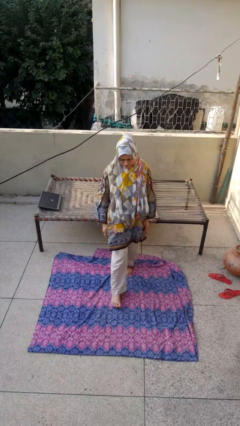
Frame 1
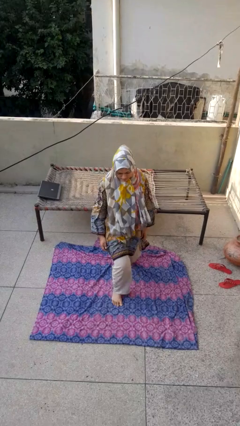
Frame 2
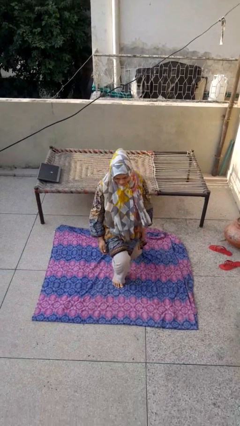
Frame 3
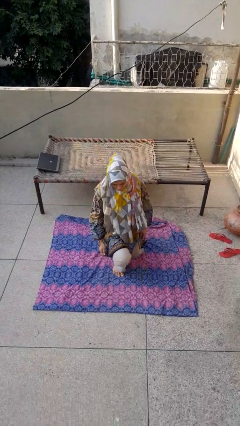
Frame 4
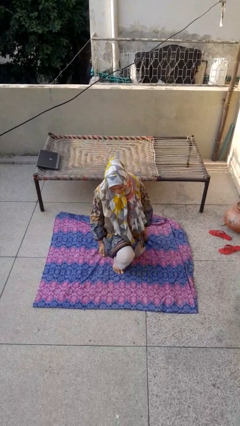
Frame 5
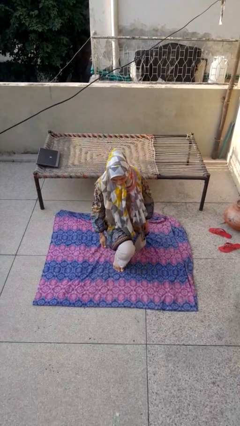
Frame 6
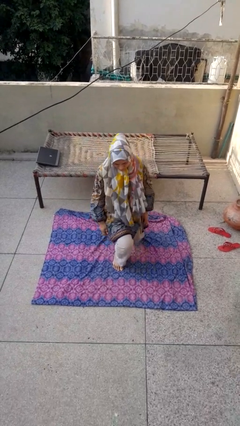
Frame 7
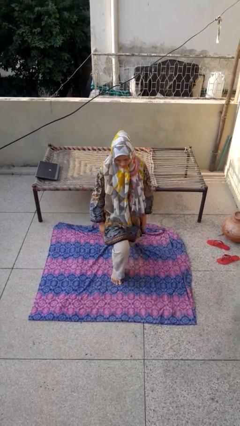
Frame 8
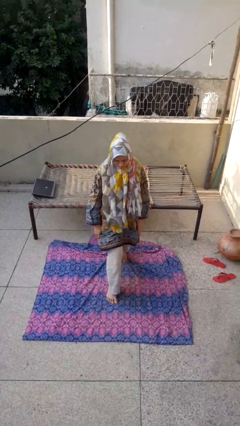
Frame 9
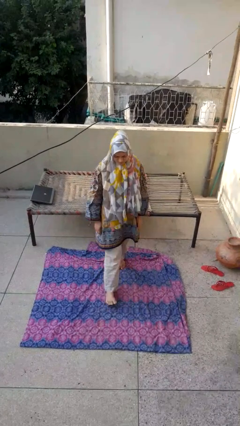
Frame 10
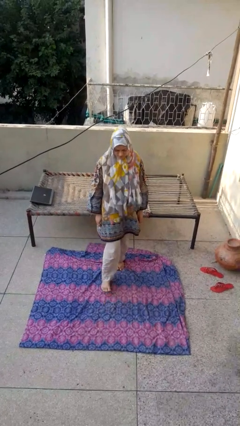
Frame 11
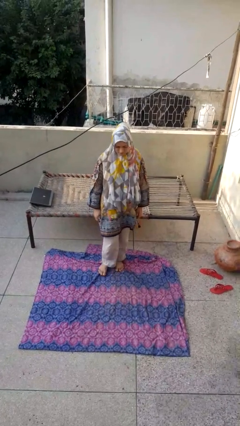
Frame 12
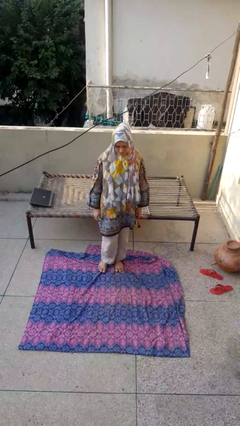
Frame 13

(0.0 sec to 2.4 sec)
person exercises with lunges

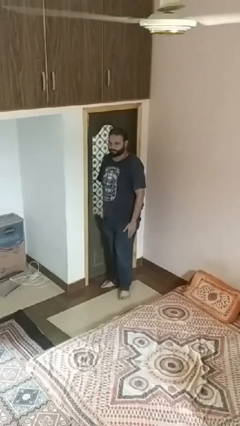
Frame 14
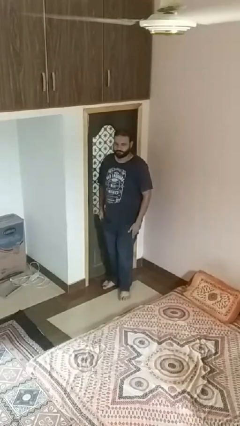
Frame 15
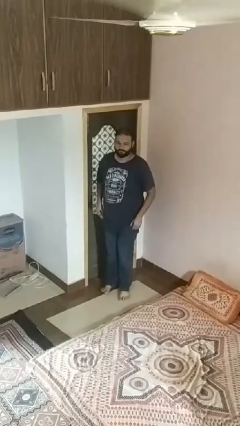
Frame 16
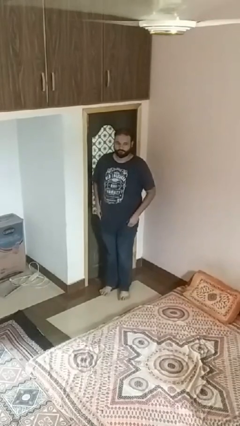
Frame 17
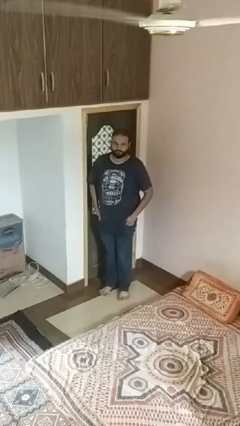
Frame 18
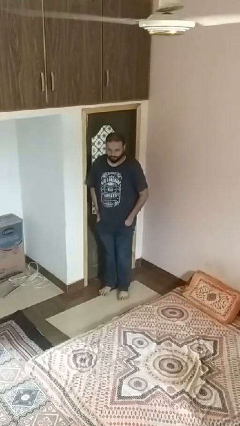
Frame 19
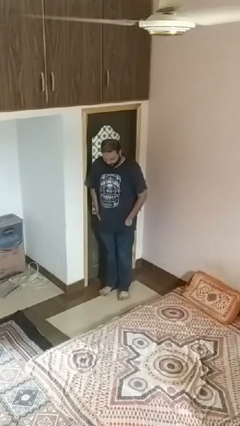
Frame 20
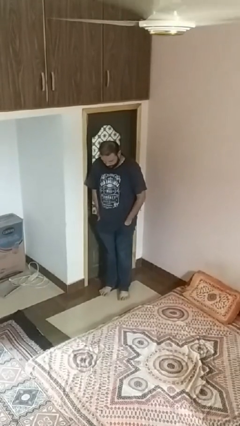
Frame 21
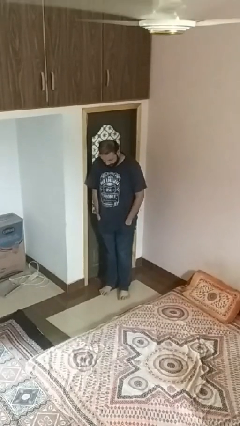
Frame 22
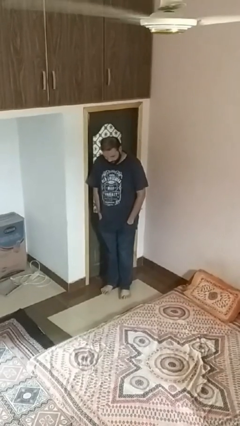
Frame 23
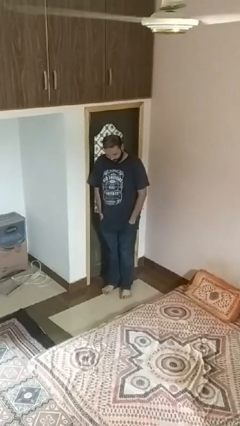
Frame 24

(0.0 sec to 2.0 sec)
person puts hands in back pockets

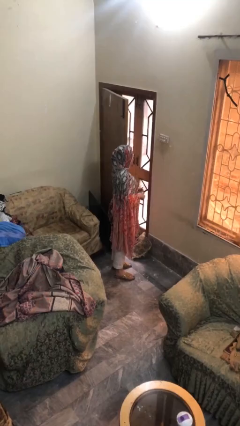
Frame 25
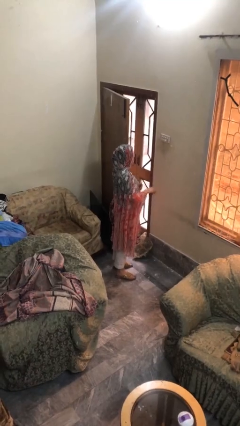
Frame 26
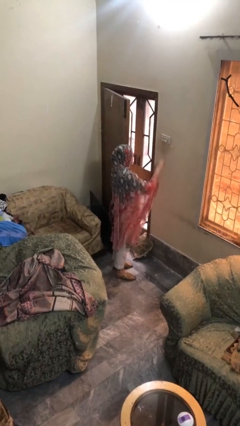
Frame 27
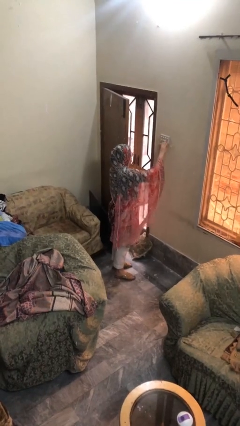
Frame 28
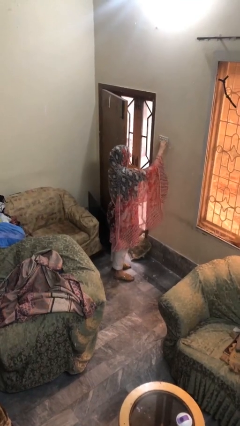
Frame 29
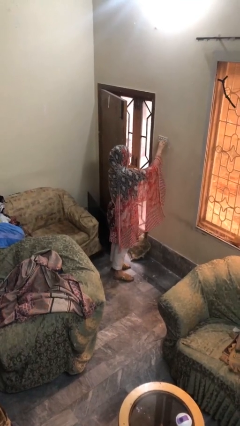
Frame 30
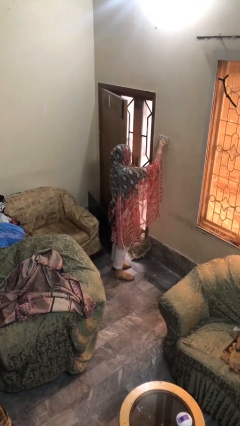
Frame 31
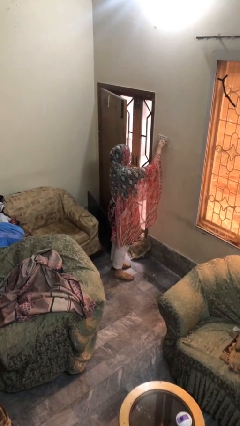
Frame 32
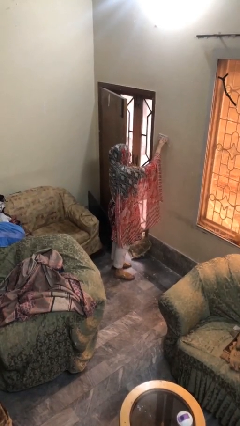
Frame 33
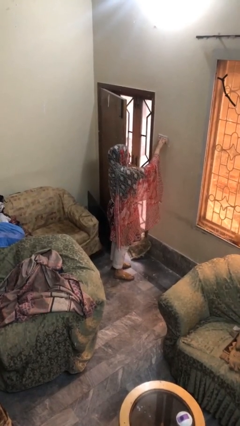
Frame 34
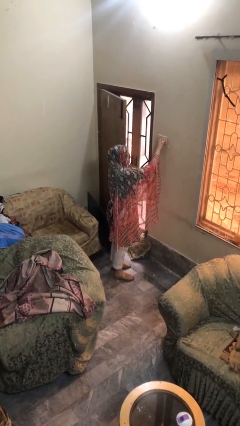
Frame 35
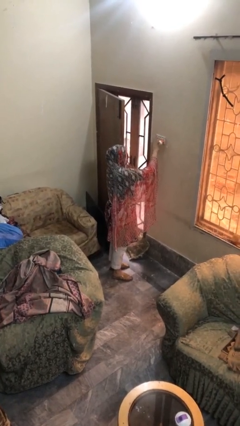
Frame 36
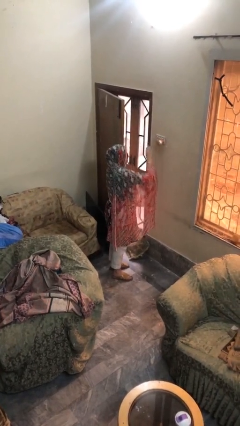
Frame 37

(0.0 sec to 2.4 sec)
person plugs into electrical socket

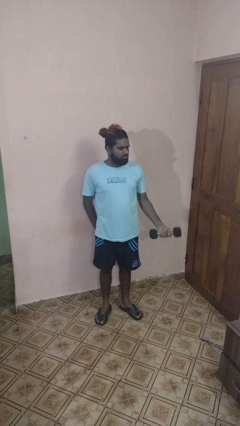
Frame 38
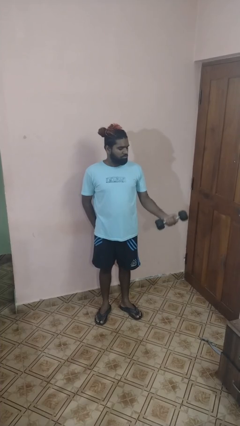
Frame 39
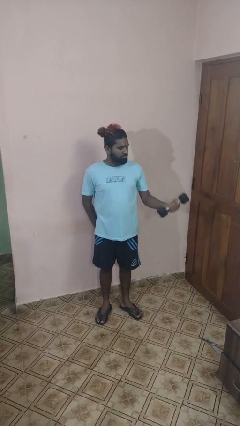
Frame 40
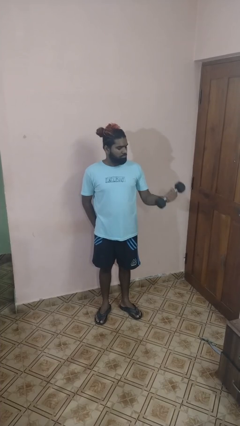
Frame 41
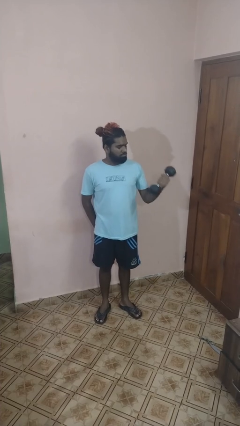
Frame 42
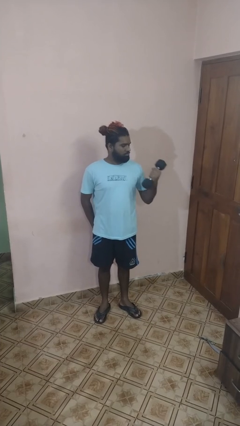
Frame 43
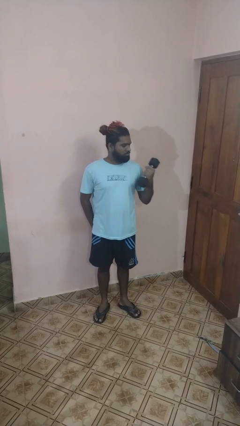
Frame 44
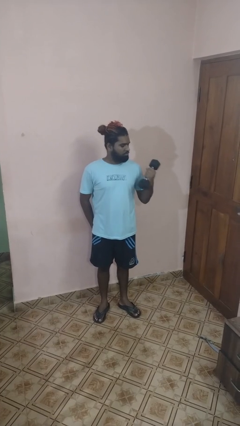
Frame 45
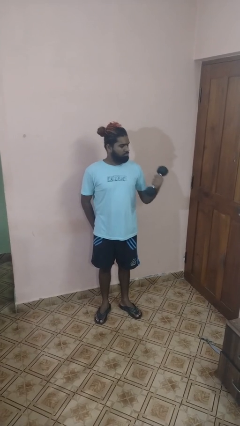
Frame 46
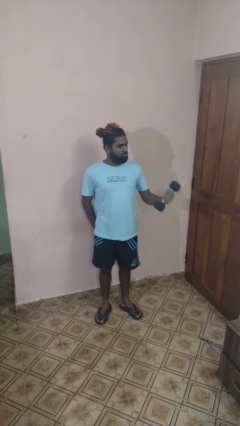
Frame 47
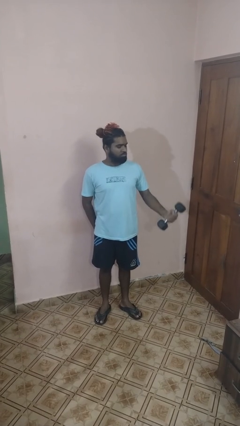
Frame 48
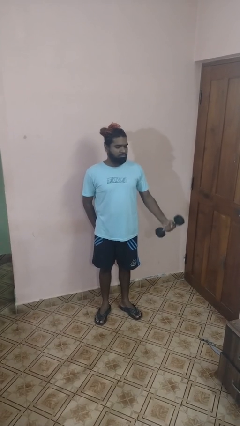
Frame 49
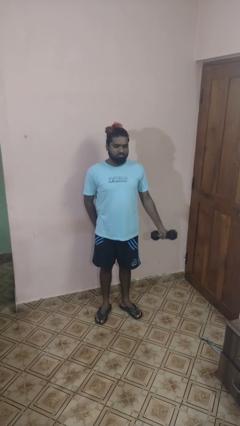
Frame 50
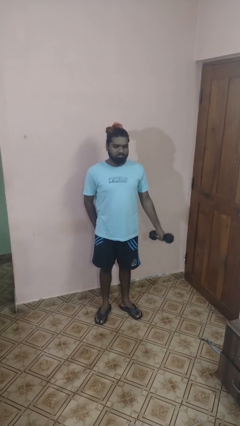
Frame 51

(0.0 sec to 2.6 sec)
person lifts dumbbells

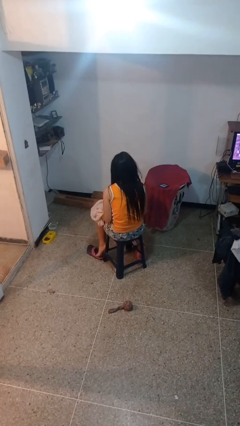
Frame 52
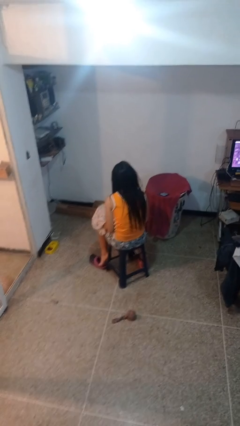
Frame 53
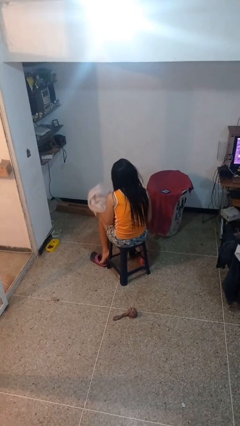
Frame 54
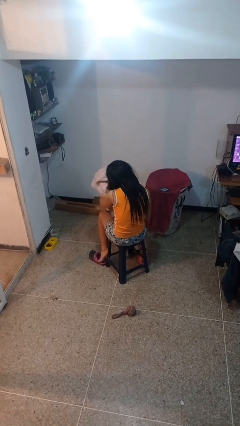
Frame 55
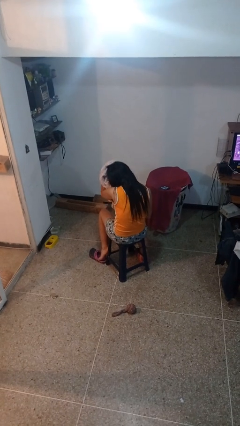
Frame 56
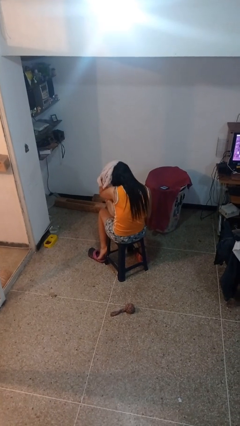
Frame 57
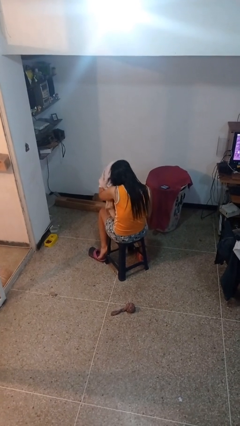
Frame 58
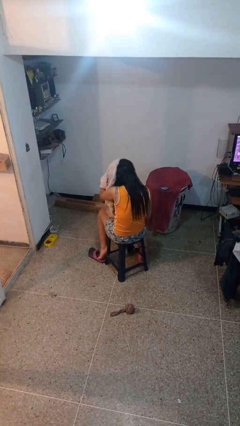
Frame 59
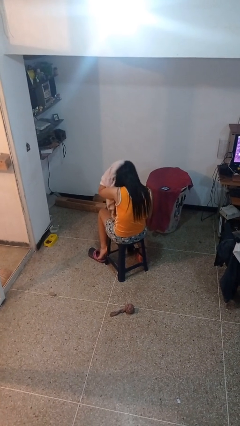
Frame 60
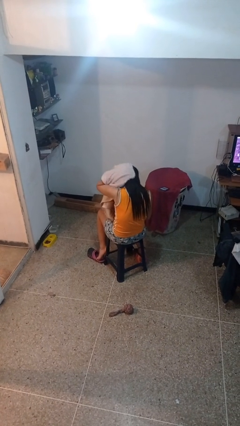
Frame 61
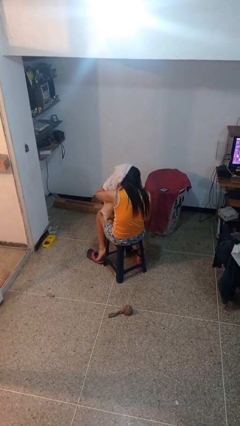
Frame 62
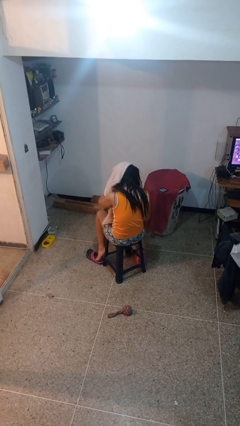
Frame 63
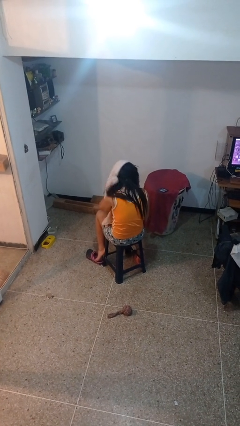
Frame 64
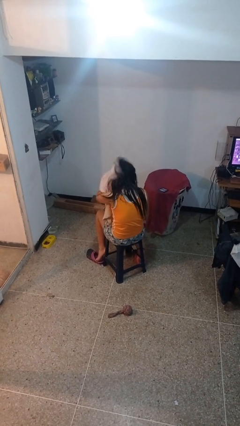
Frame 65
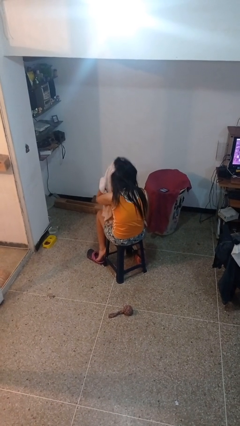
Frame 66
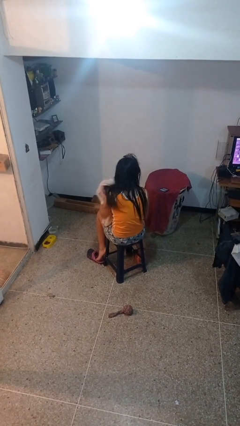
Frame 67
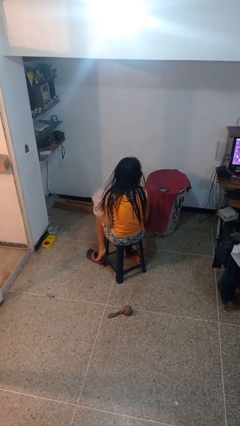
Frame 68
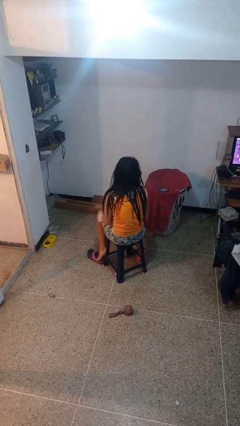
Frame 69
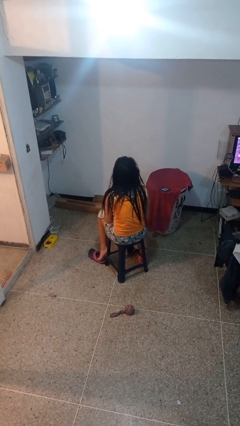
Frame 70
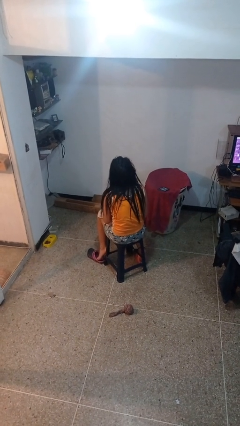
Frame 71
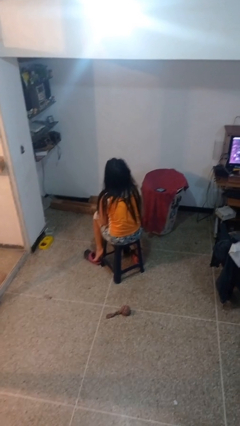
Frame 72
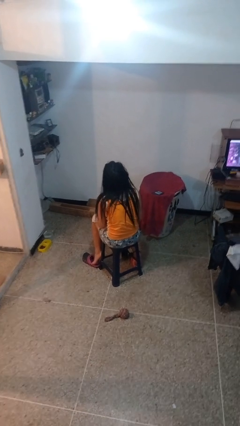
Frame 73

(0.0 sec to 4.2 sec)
person dries hair with towel

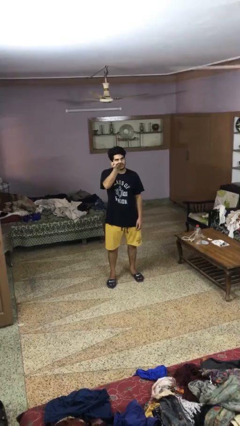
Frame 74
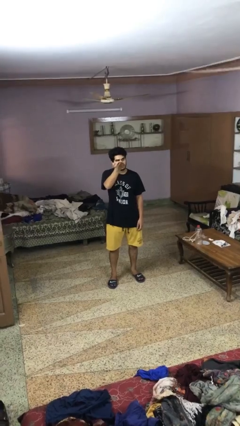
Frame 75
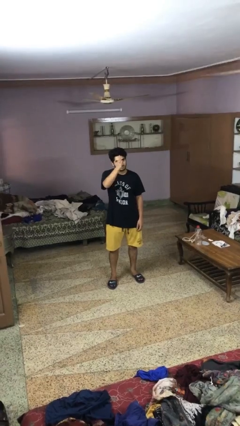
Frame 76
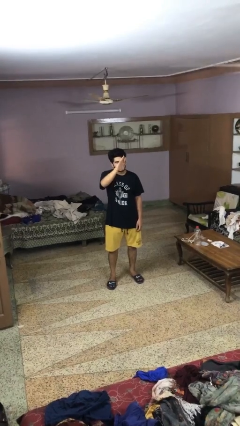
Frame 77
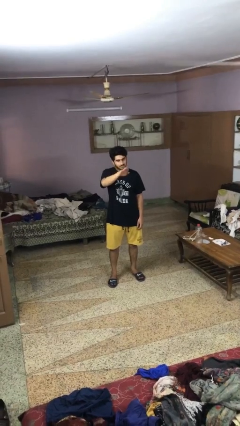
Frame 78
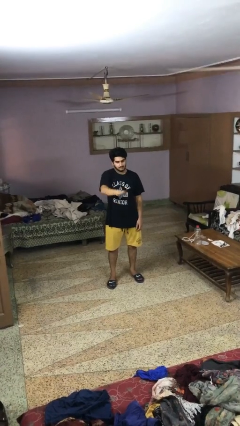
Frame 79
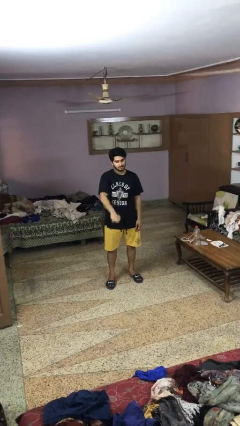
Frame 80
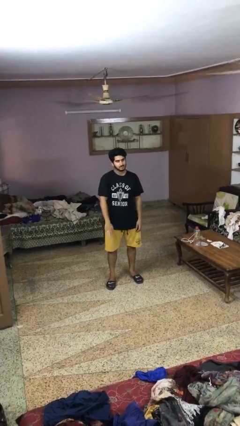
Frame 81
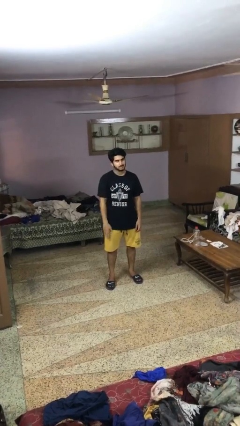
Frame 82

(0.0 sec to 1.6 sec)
person gestures swipe down

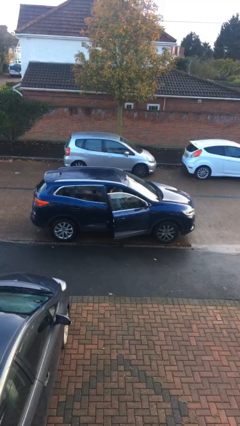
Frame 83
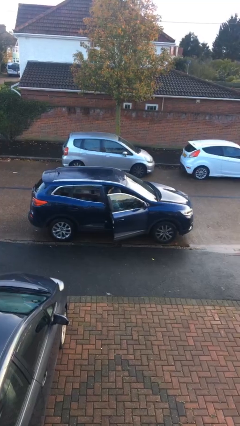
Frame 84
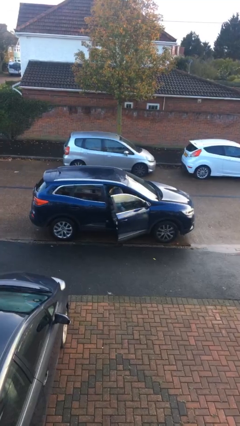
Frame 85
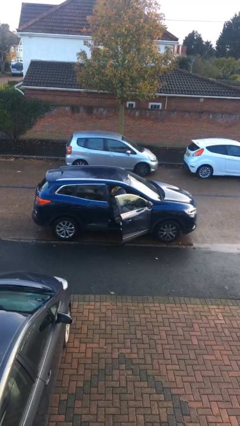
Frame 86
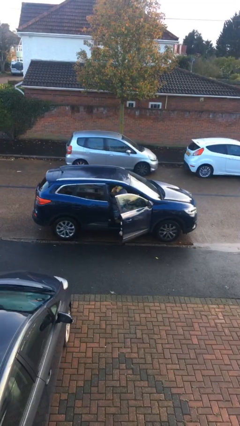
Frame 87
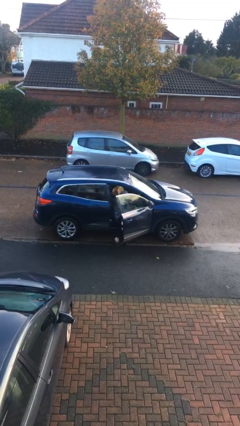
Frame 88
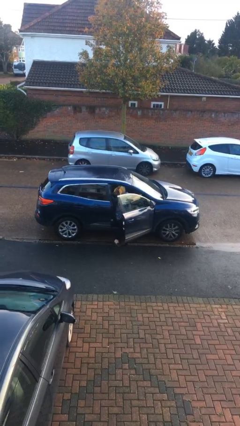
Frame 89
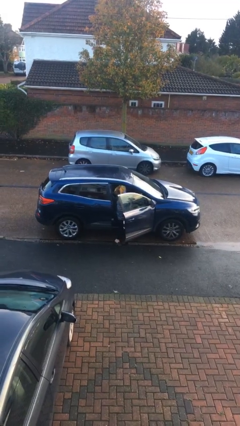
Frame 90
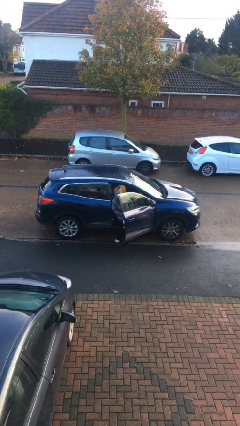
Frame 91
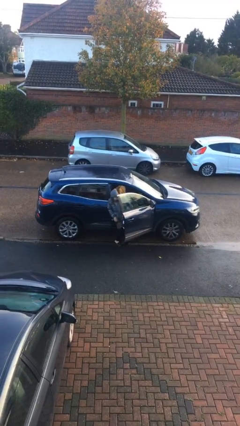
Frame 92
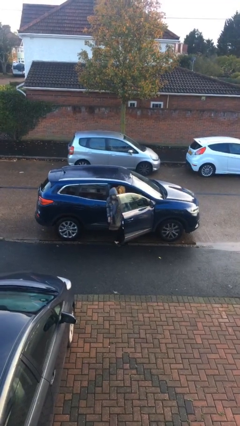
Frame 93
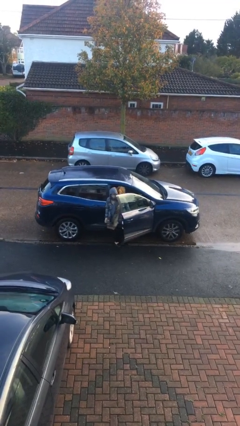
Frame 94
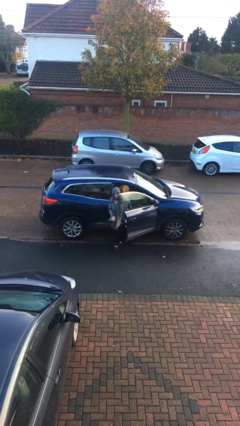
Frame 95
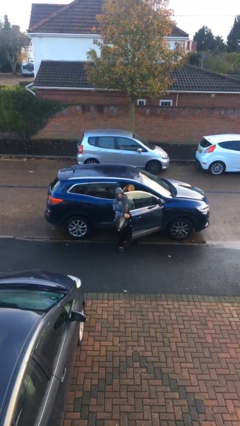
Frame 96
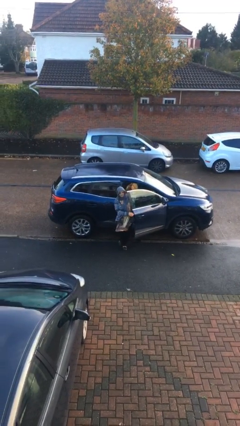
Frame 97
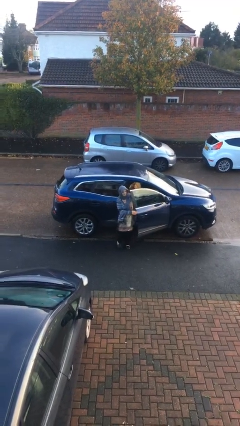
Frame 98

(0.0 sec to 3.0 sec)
person exits car
